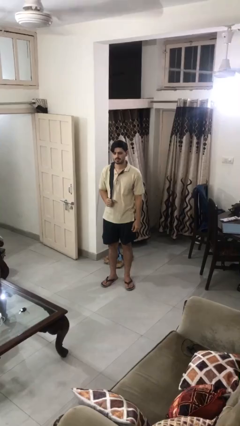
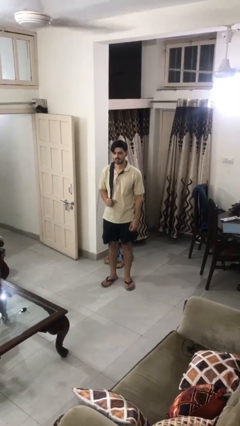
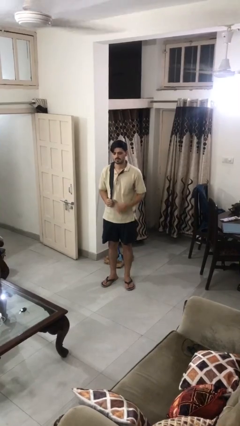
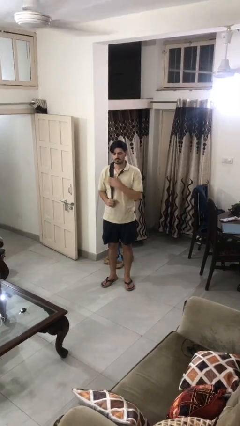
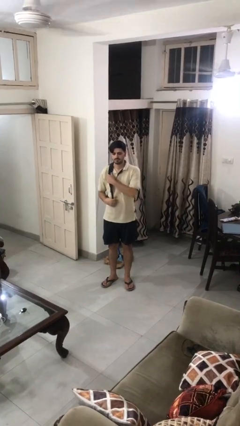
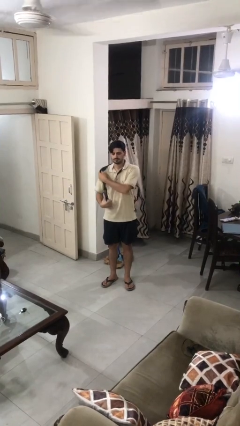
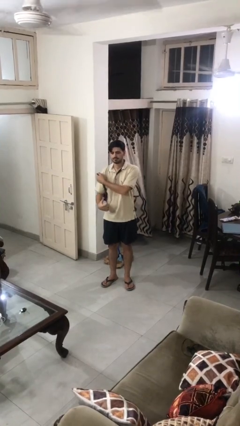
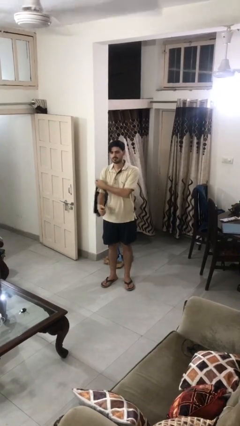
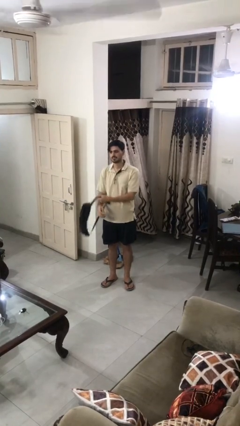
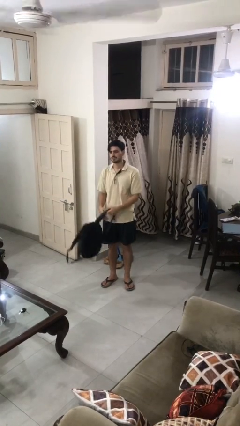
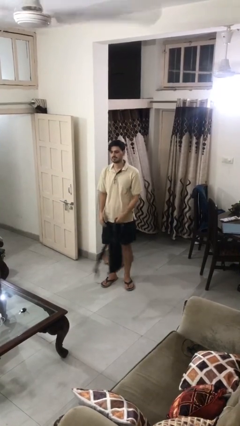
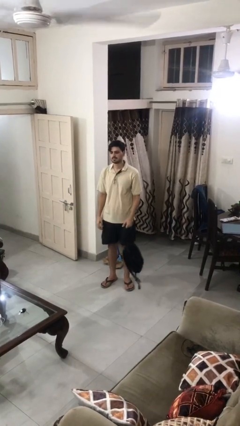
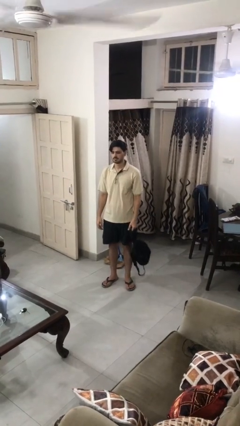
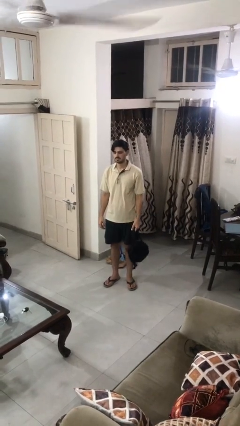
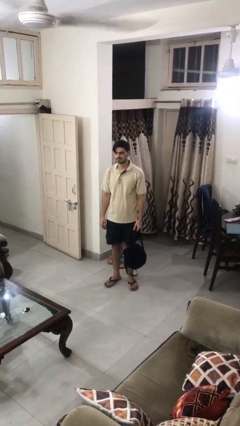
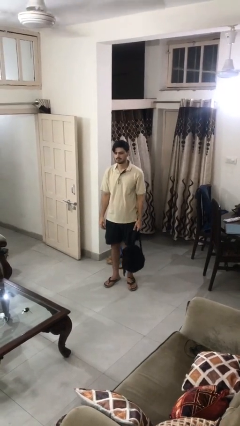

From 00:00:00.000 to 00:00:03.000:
person takes off backpack

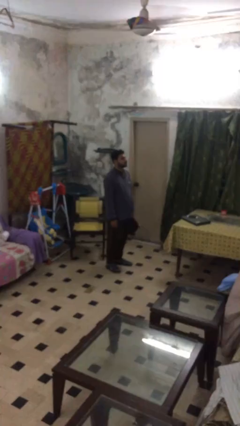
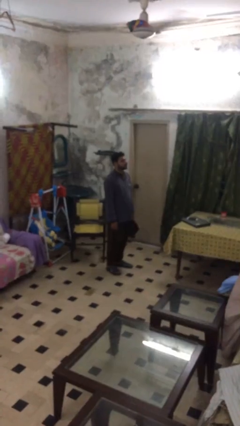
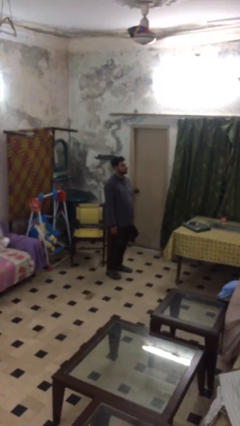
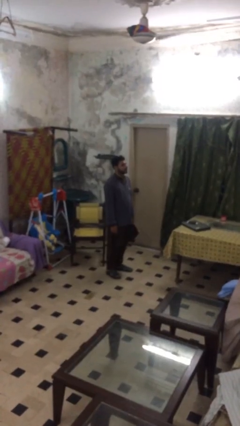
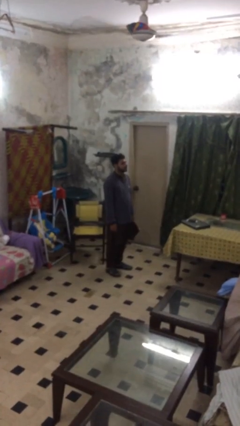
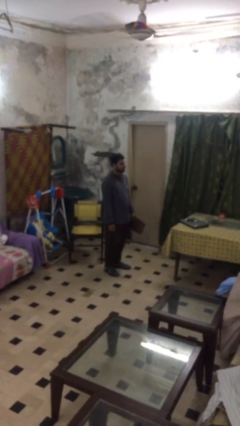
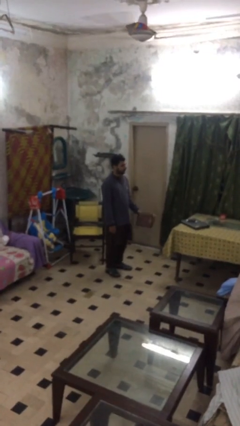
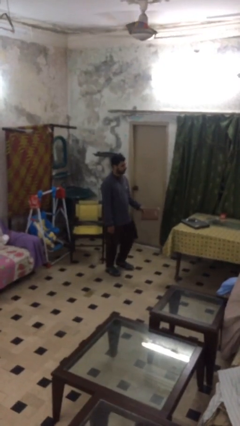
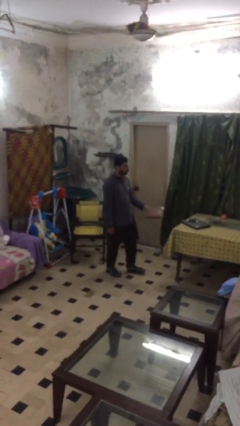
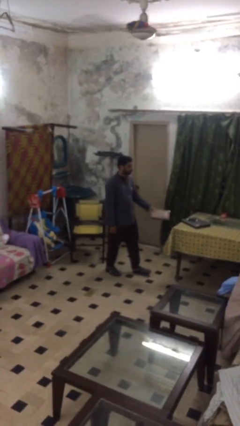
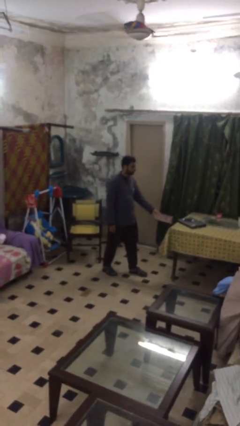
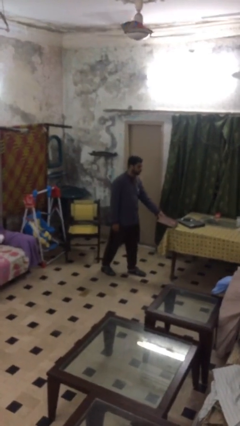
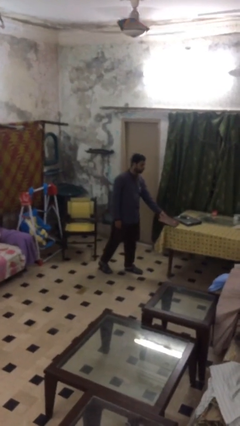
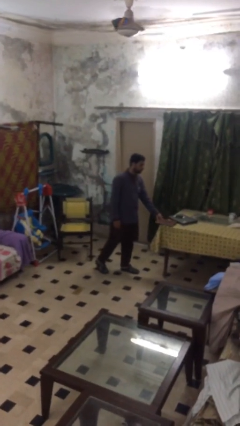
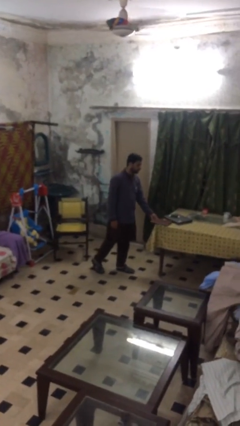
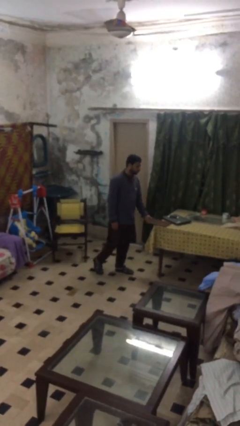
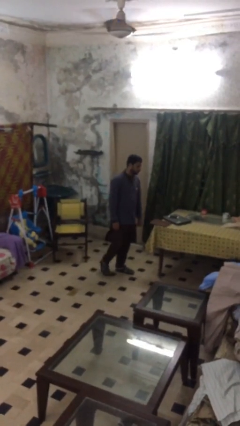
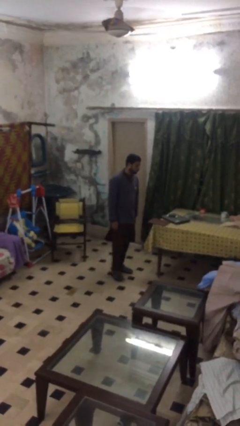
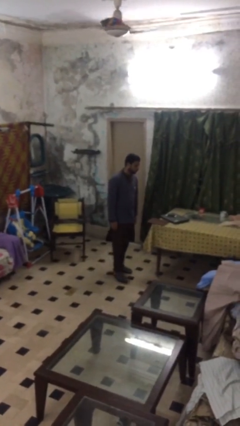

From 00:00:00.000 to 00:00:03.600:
person puts down object on table

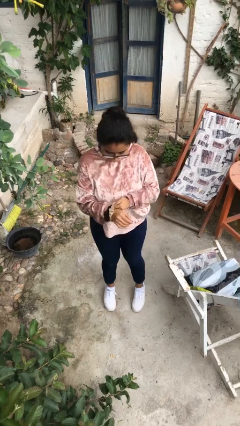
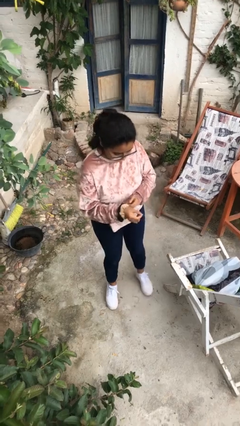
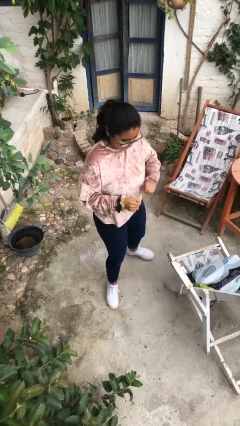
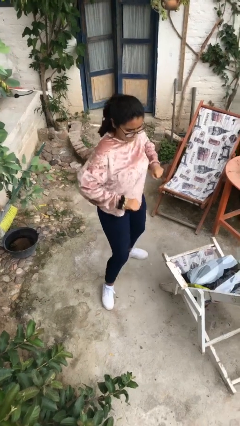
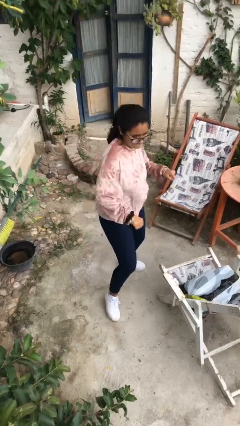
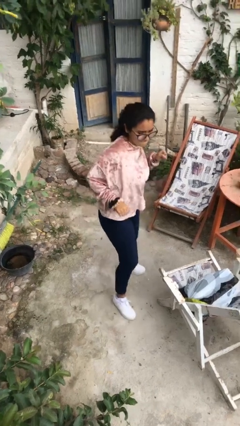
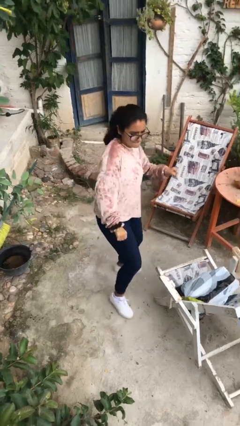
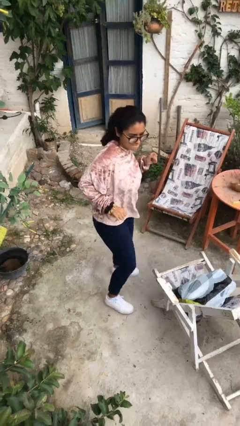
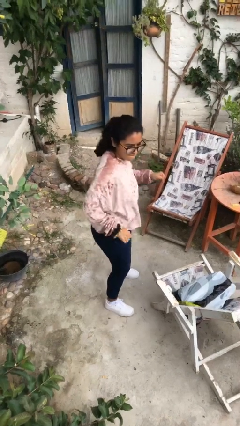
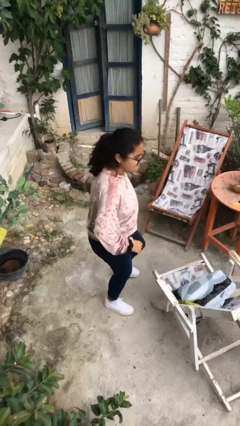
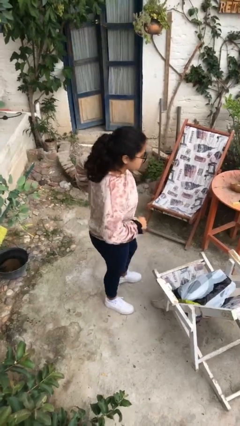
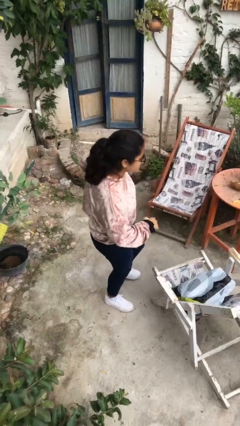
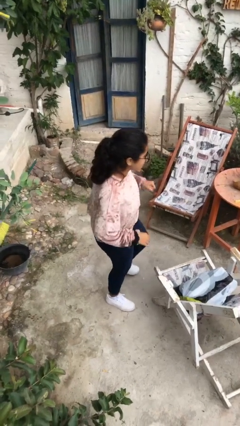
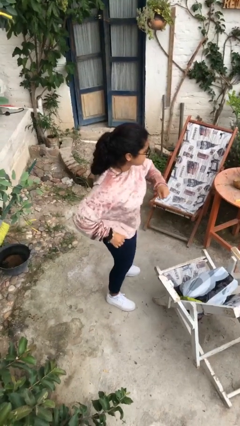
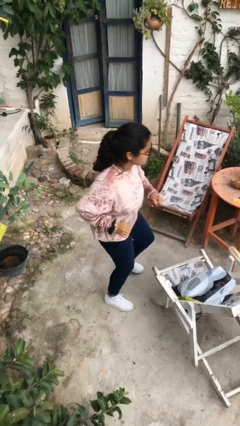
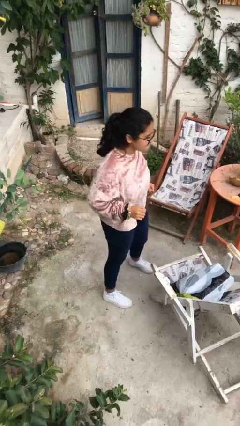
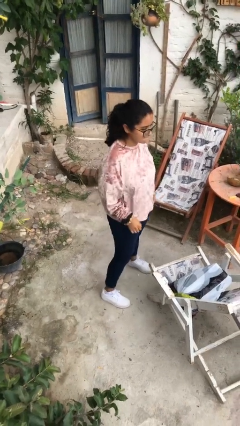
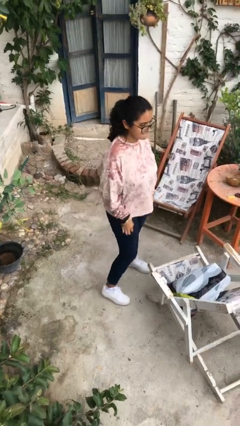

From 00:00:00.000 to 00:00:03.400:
person dances in place

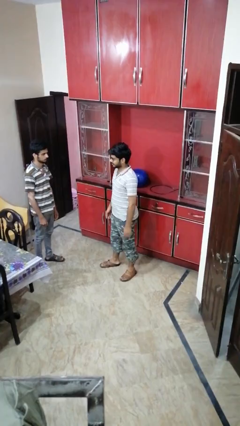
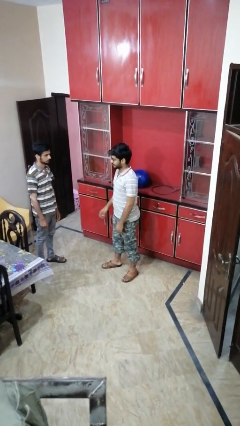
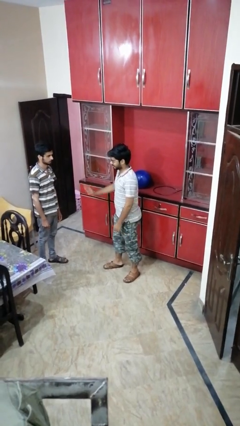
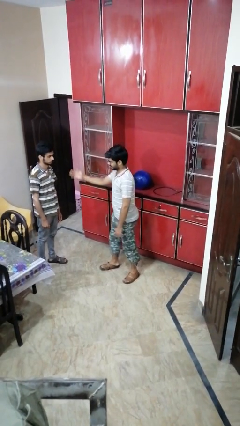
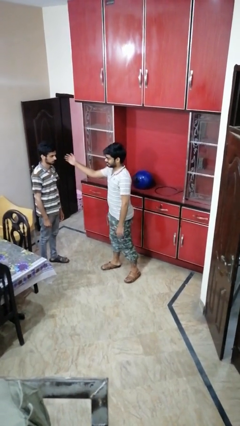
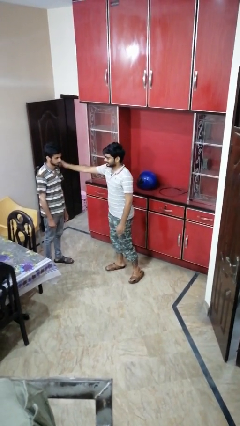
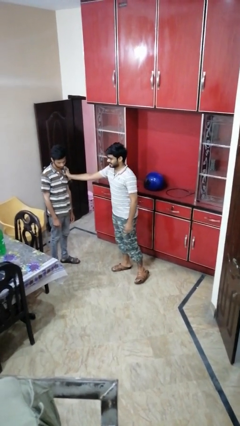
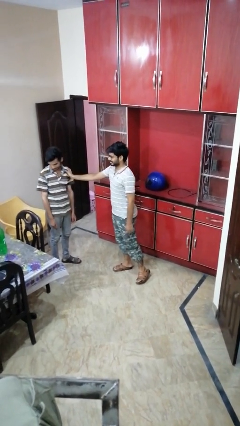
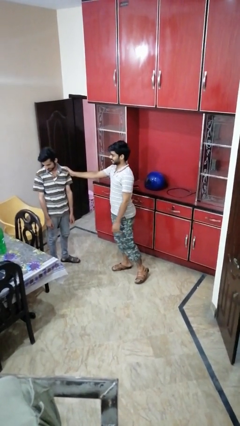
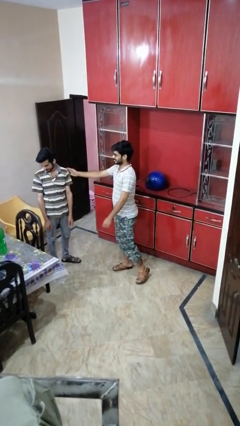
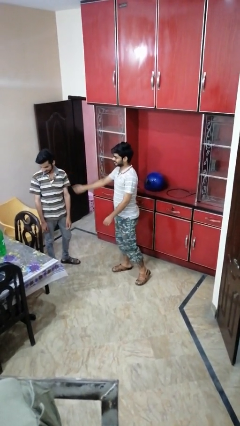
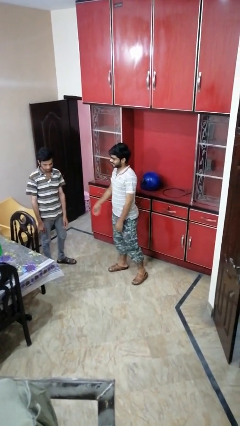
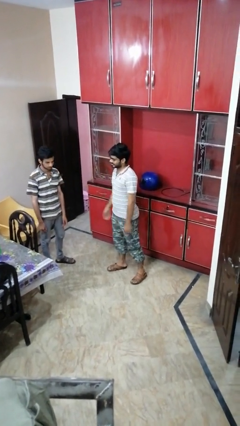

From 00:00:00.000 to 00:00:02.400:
person shoves person

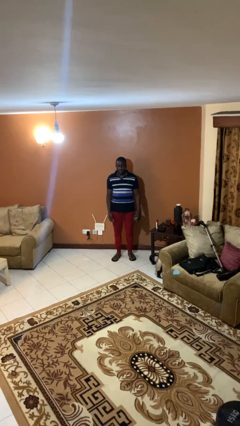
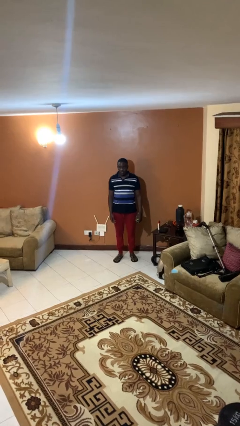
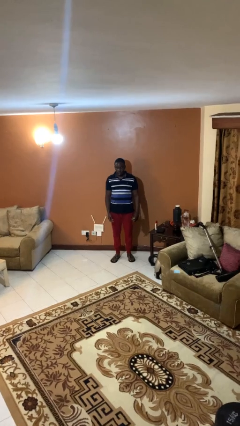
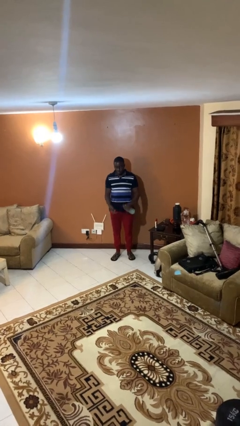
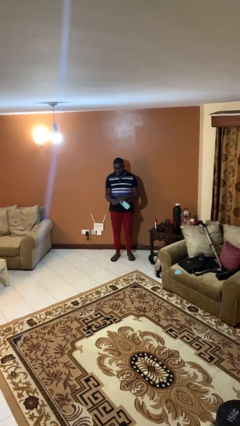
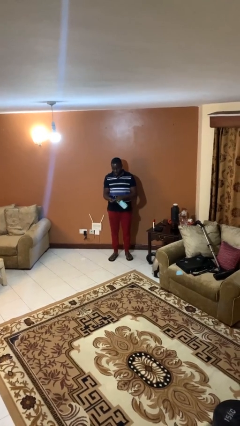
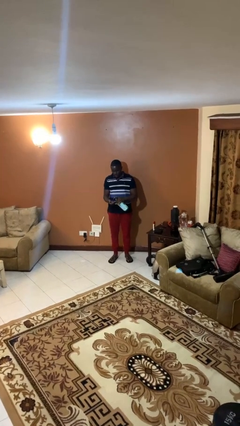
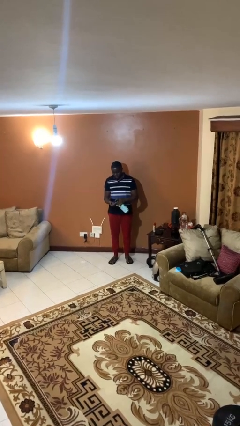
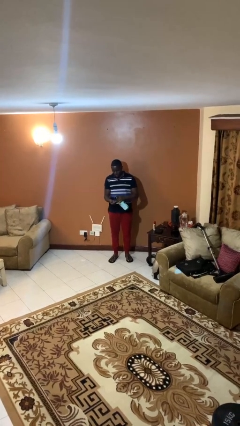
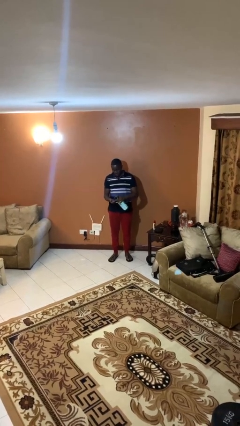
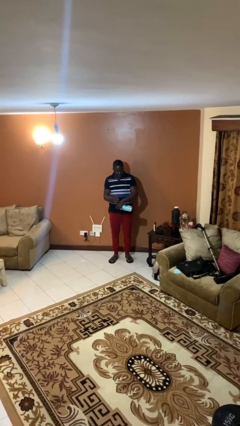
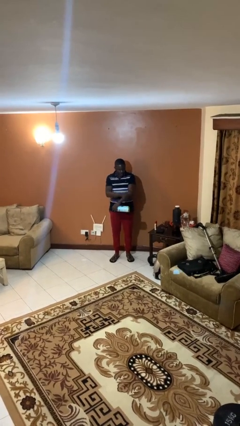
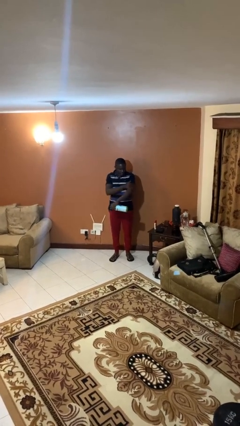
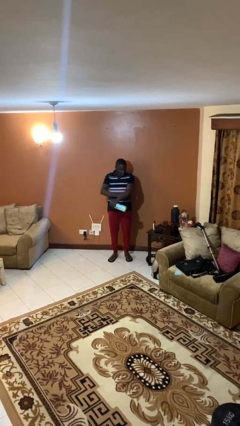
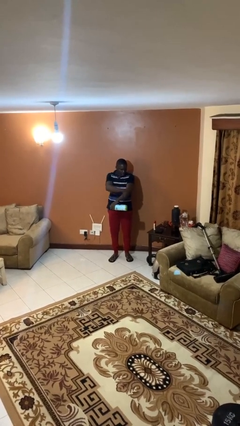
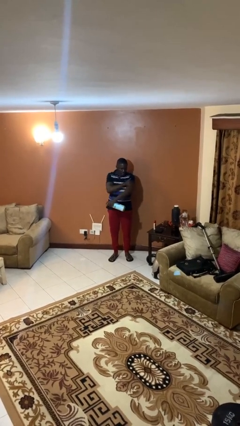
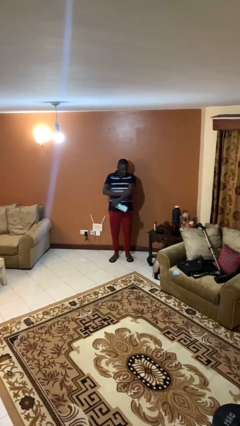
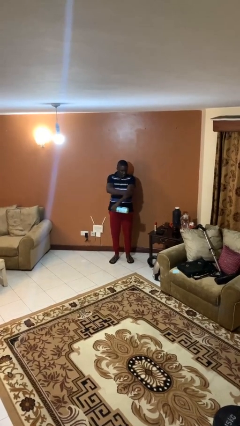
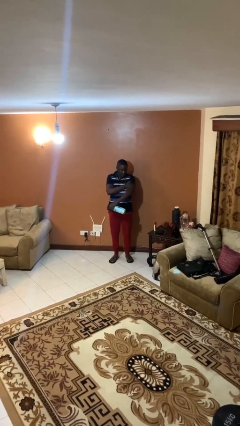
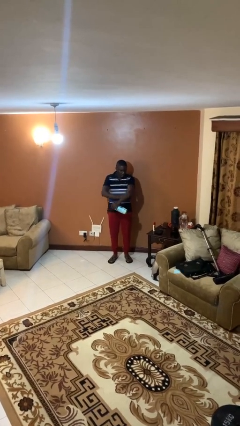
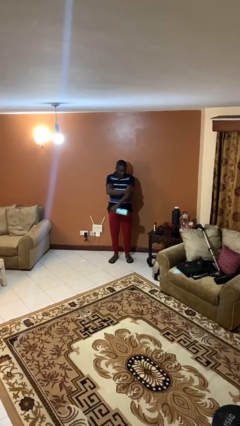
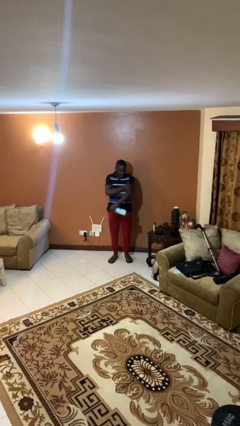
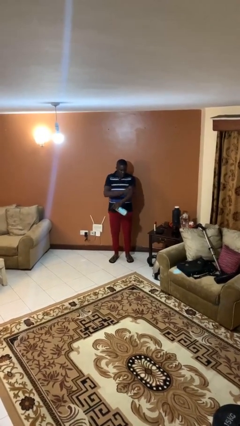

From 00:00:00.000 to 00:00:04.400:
person applies sunscreen

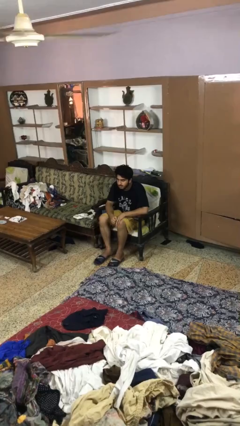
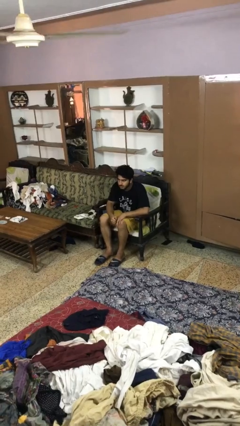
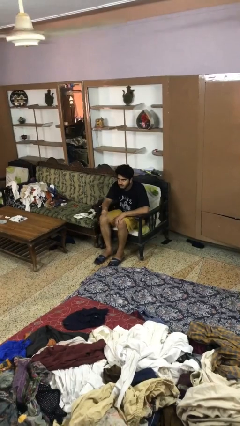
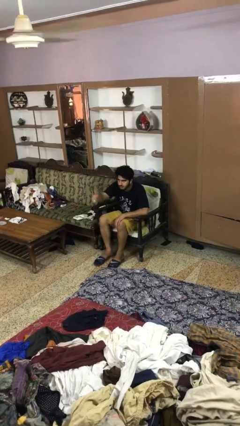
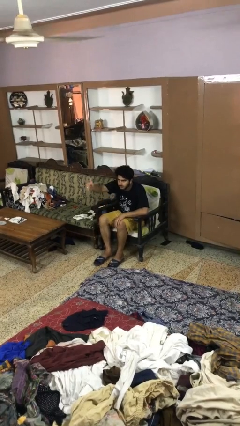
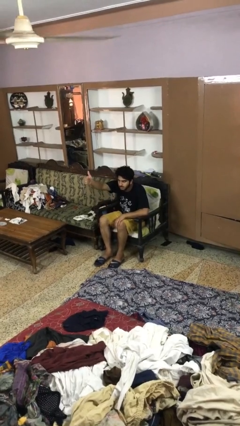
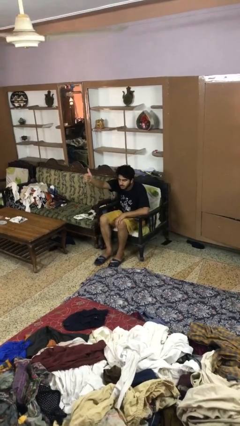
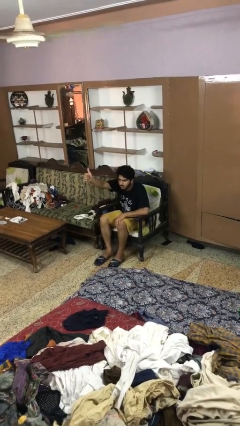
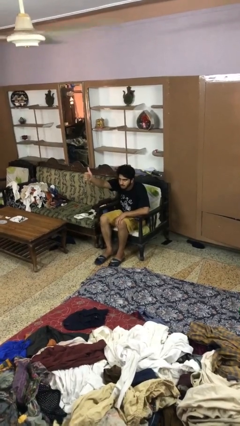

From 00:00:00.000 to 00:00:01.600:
person gestures thumbs up
